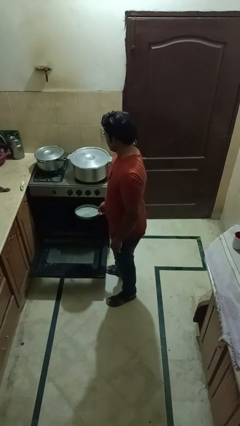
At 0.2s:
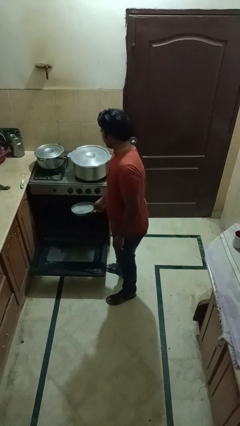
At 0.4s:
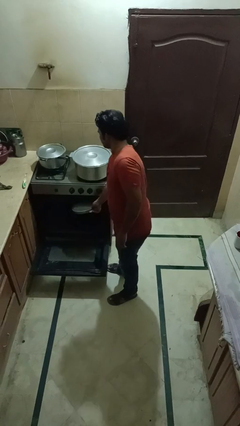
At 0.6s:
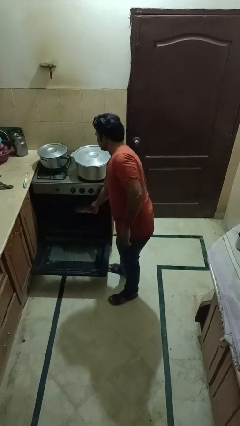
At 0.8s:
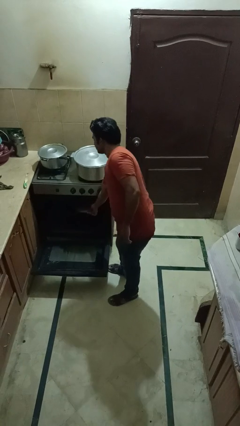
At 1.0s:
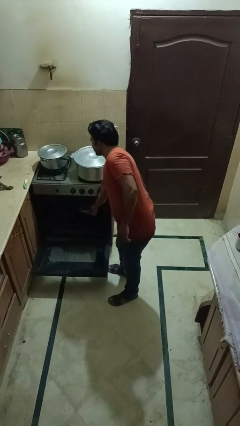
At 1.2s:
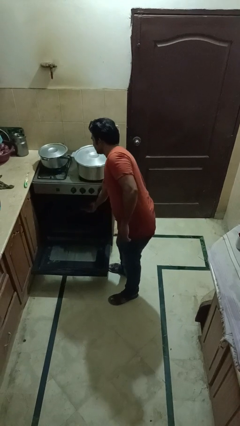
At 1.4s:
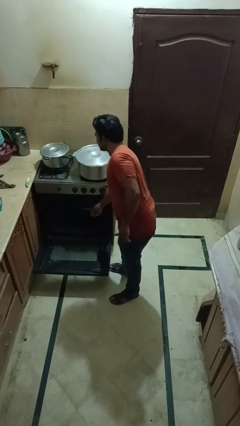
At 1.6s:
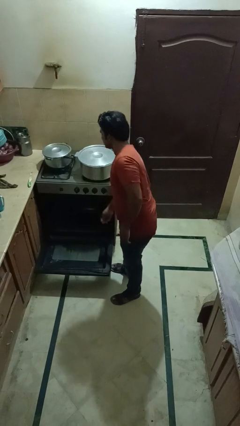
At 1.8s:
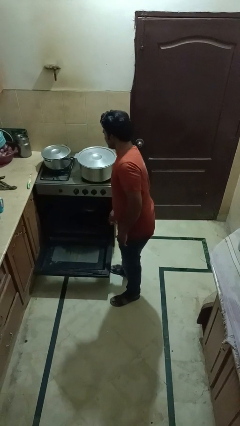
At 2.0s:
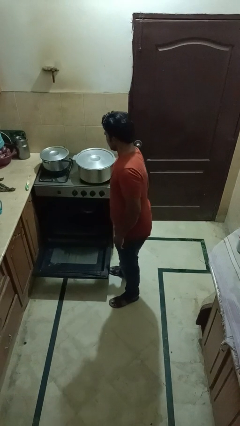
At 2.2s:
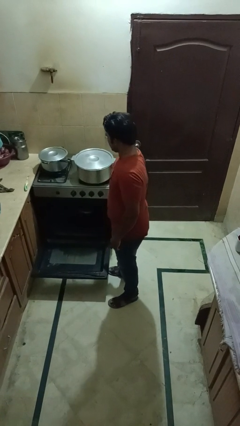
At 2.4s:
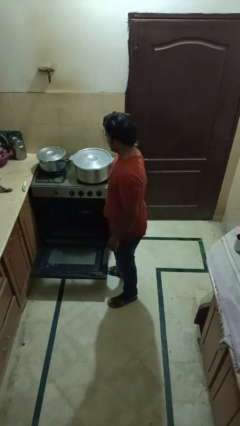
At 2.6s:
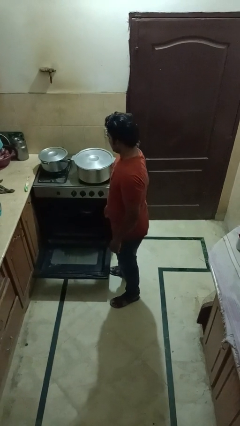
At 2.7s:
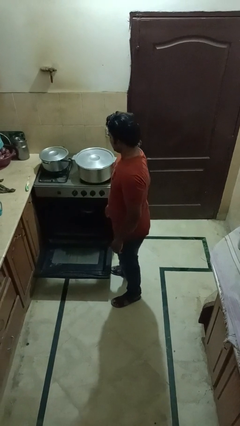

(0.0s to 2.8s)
person puts object into oven

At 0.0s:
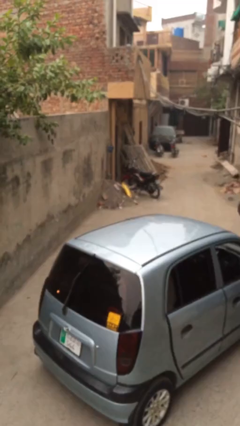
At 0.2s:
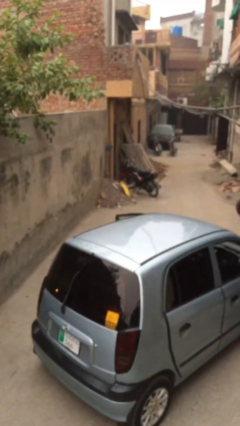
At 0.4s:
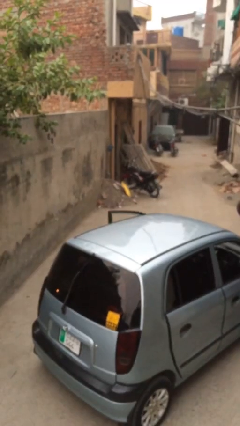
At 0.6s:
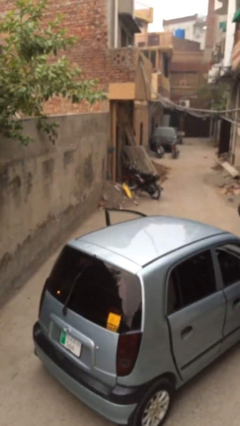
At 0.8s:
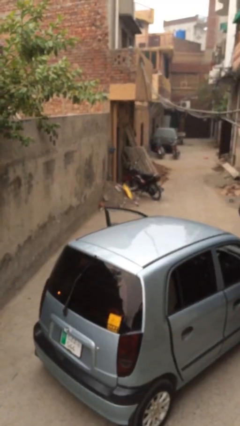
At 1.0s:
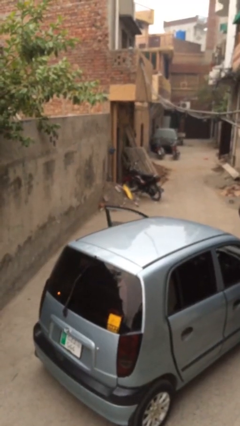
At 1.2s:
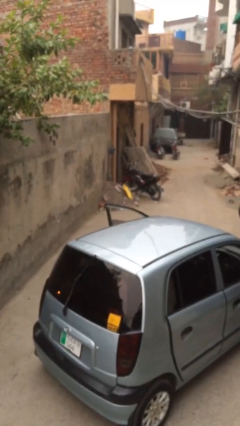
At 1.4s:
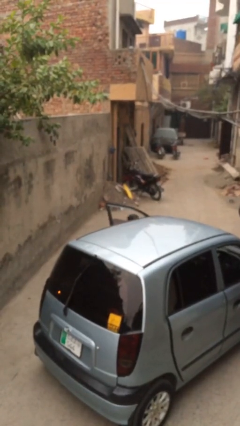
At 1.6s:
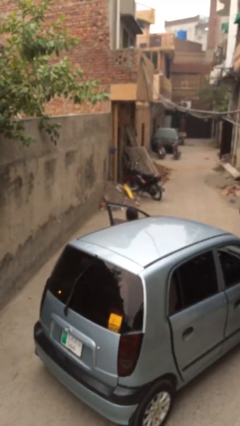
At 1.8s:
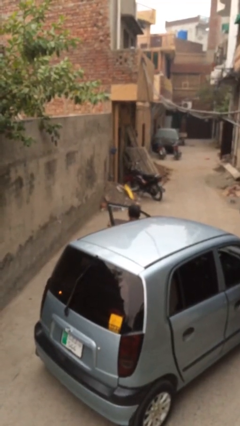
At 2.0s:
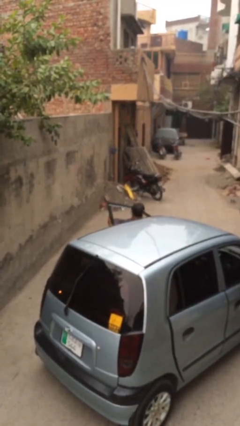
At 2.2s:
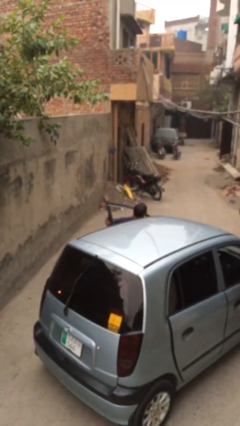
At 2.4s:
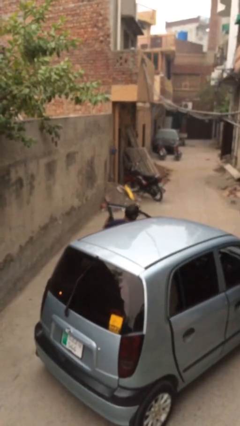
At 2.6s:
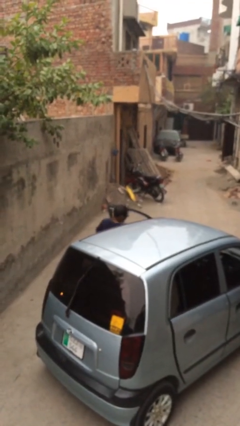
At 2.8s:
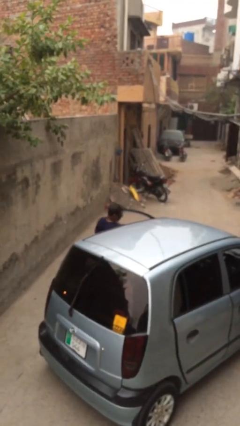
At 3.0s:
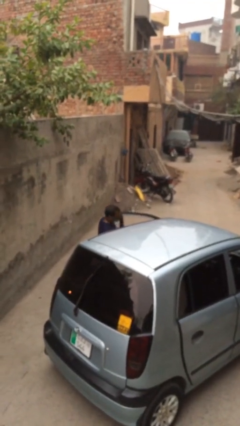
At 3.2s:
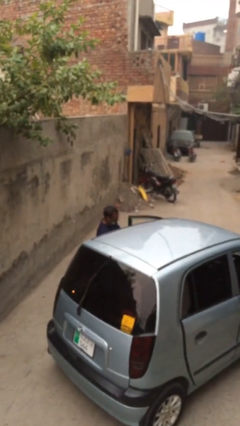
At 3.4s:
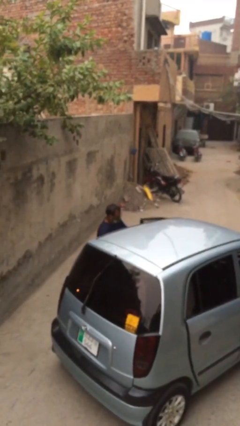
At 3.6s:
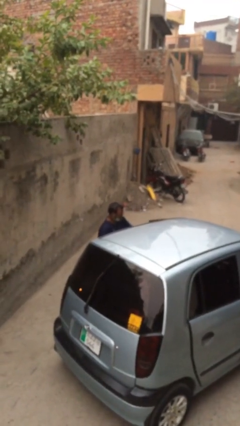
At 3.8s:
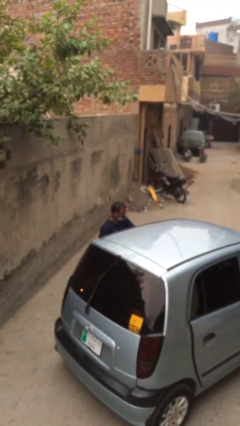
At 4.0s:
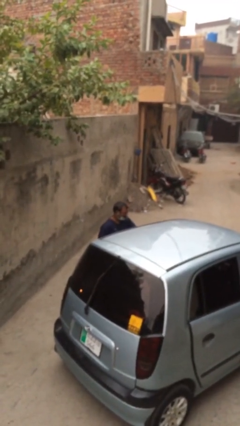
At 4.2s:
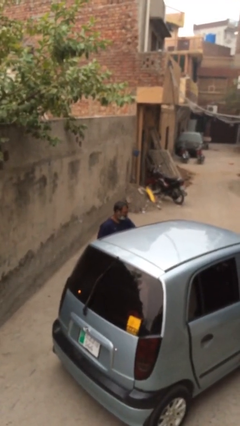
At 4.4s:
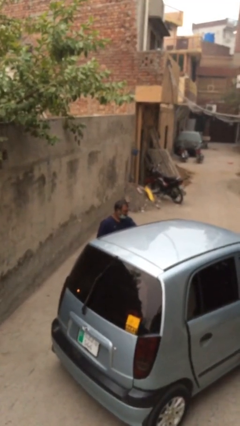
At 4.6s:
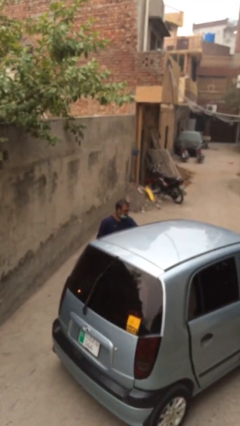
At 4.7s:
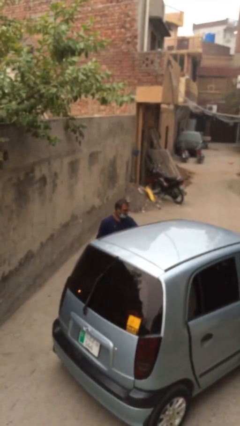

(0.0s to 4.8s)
car drops off person

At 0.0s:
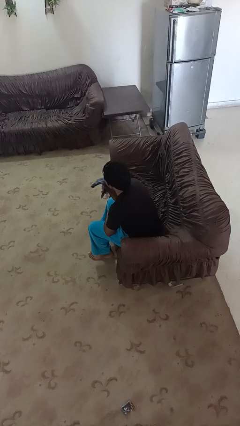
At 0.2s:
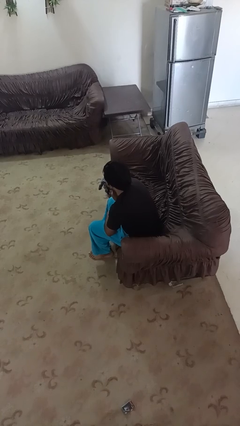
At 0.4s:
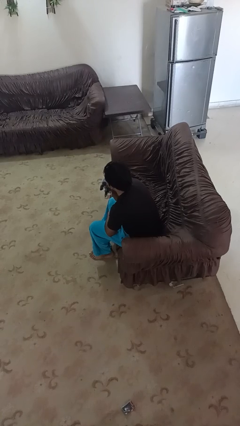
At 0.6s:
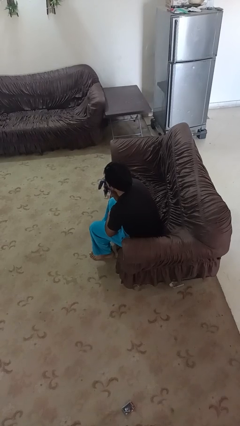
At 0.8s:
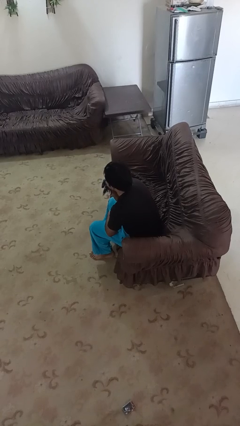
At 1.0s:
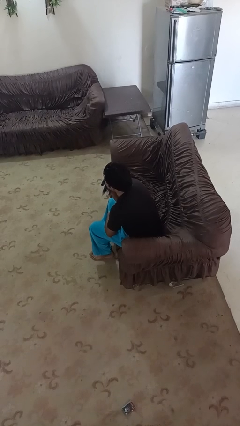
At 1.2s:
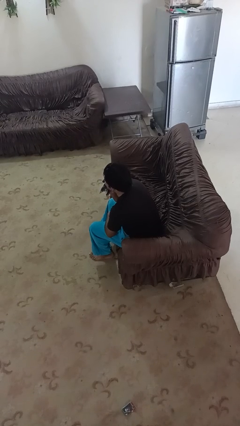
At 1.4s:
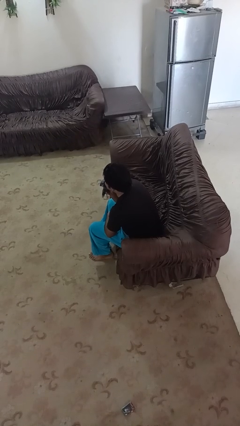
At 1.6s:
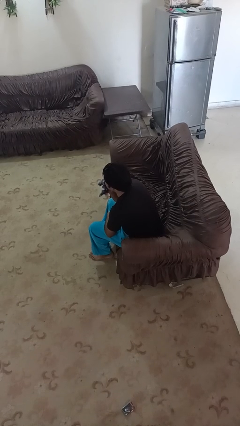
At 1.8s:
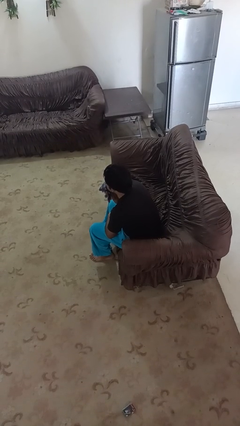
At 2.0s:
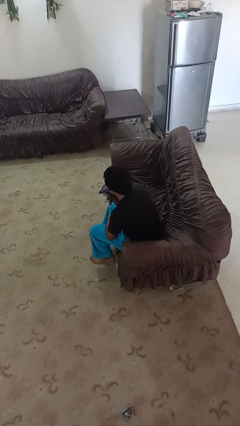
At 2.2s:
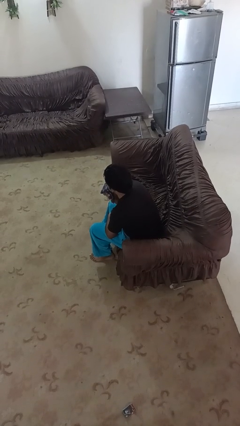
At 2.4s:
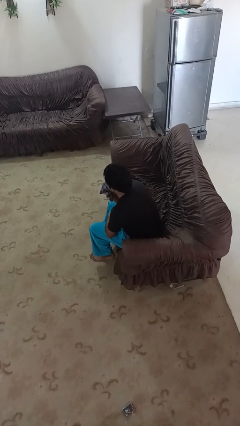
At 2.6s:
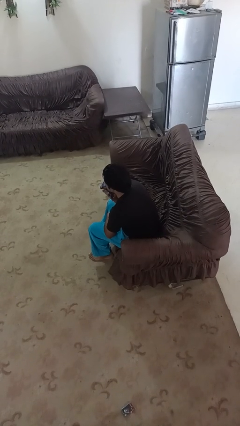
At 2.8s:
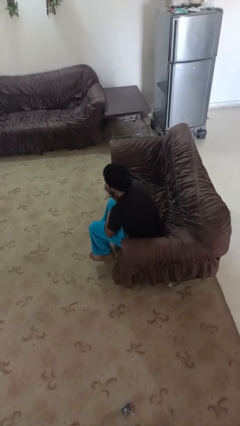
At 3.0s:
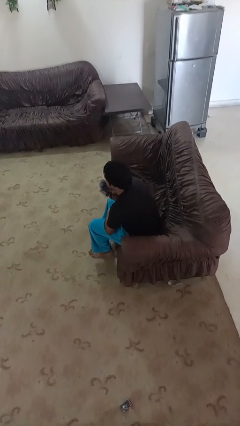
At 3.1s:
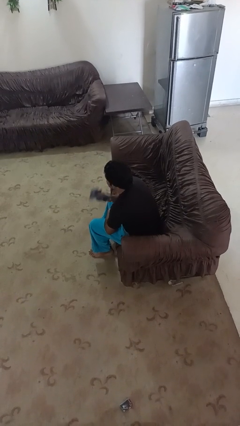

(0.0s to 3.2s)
person wipes mouth with napkin

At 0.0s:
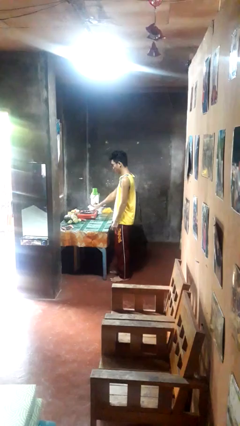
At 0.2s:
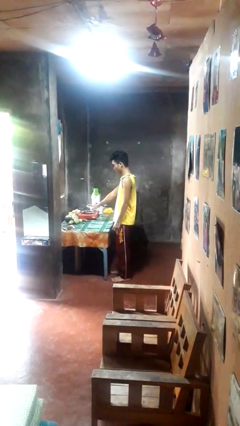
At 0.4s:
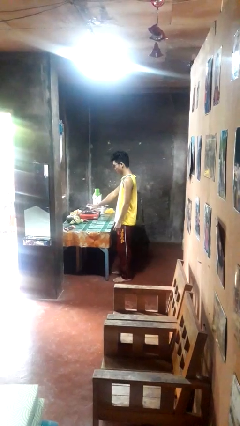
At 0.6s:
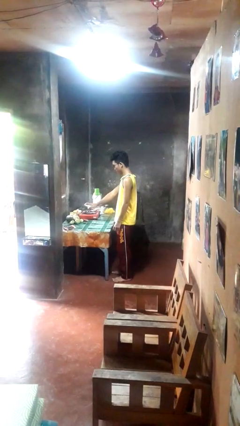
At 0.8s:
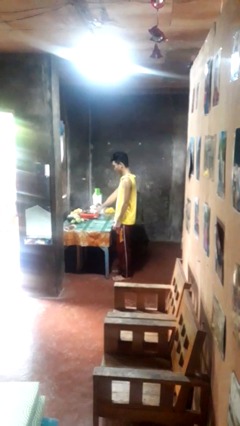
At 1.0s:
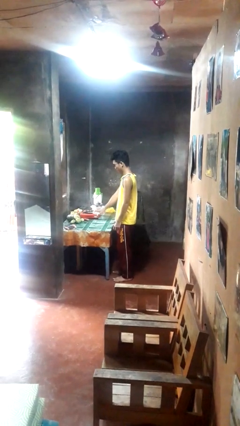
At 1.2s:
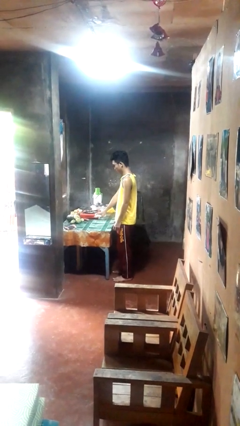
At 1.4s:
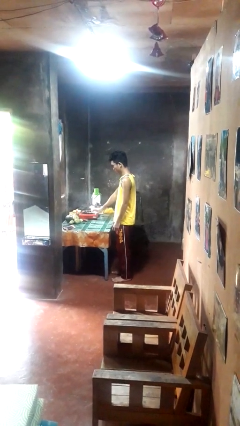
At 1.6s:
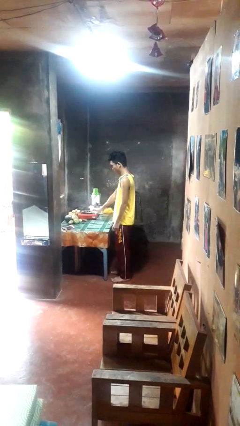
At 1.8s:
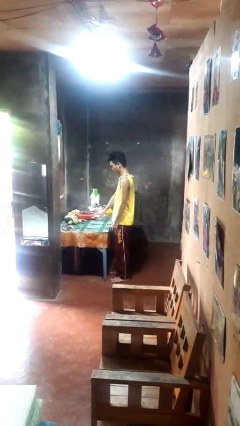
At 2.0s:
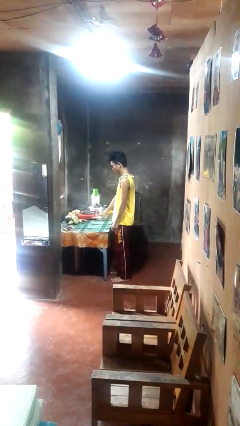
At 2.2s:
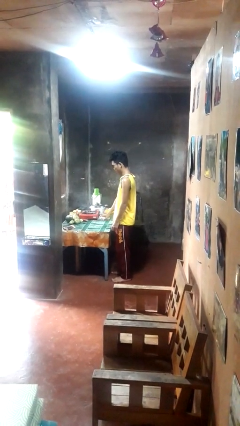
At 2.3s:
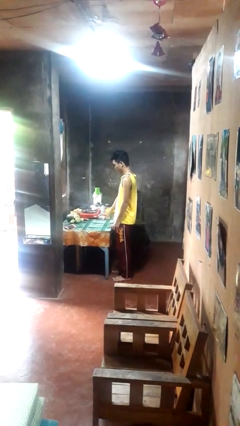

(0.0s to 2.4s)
person sprays from bottle

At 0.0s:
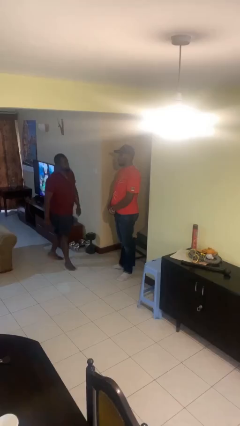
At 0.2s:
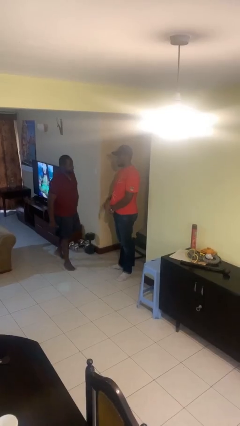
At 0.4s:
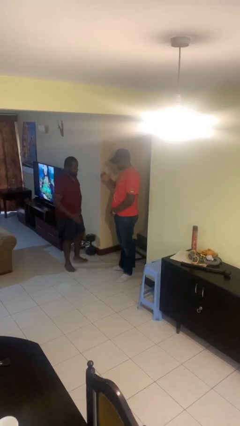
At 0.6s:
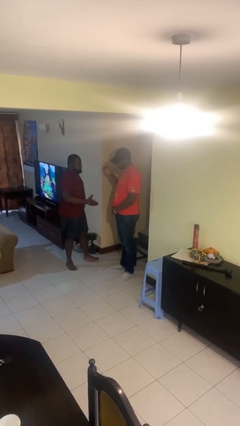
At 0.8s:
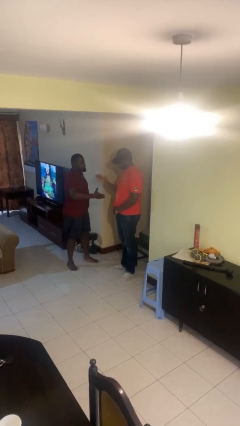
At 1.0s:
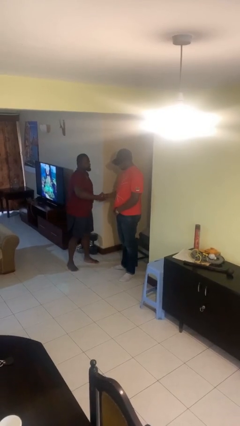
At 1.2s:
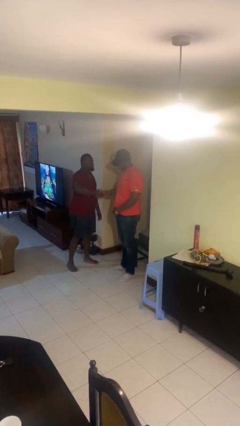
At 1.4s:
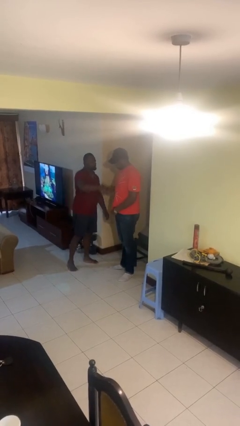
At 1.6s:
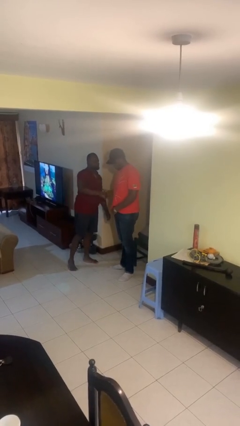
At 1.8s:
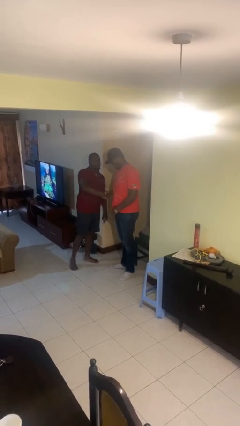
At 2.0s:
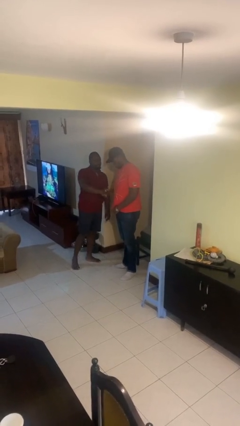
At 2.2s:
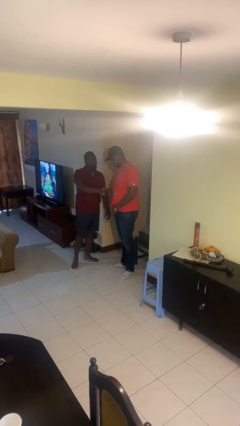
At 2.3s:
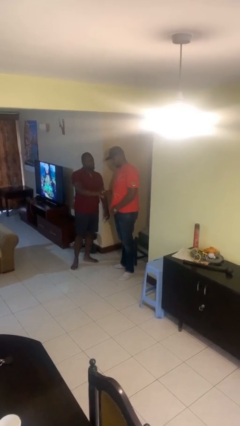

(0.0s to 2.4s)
person shakes hand

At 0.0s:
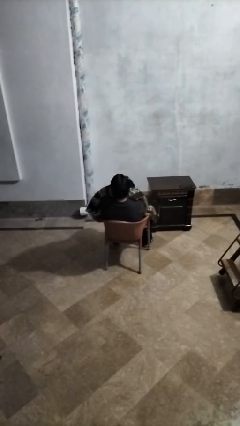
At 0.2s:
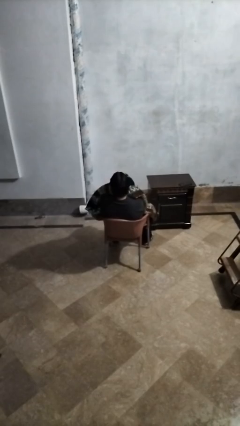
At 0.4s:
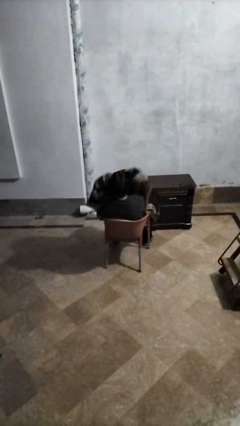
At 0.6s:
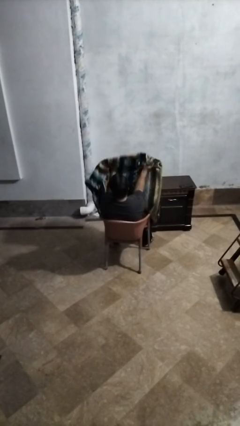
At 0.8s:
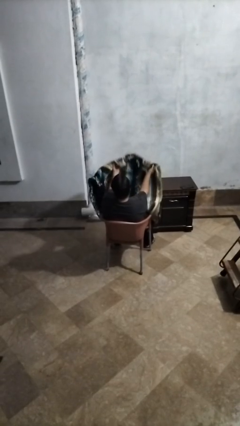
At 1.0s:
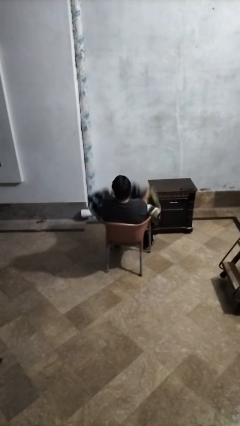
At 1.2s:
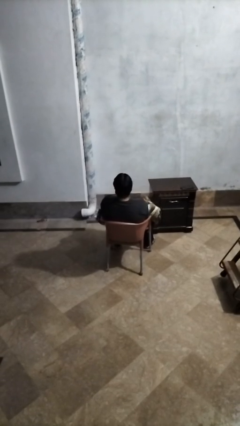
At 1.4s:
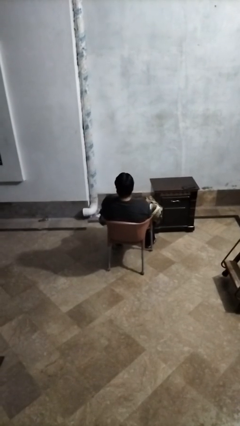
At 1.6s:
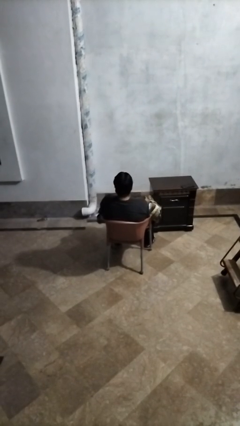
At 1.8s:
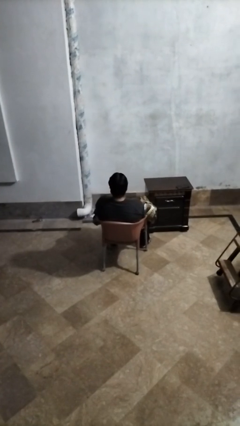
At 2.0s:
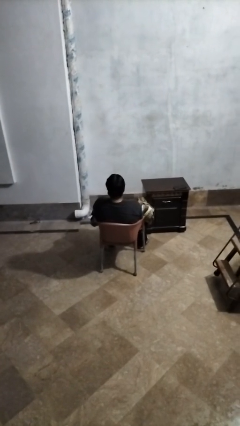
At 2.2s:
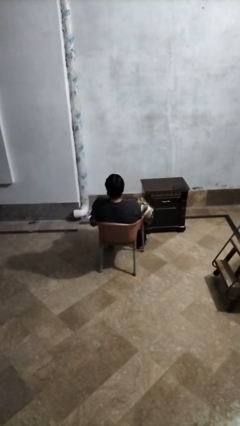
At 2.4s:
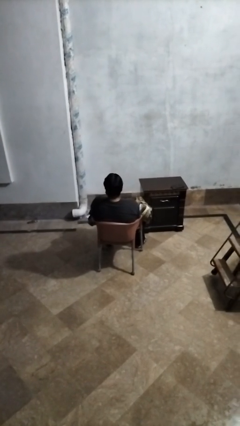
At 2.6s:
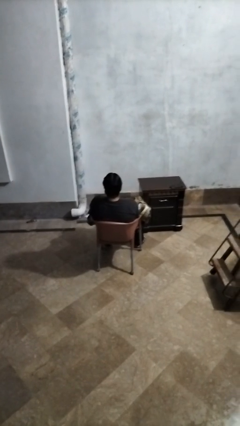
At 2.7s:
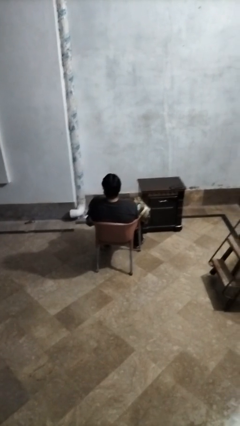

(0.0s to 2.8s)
person uncovers with blanket
